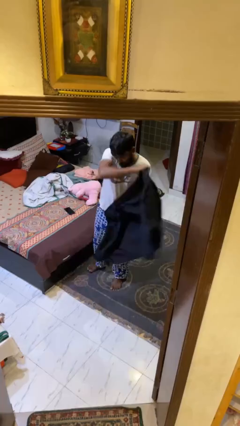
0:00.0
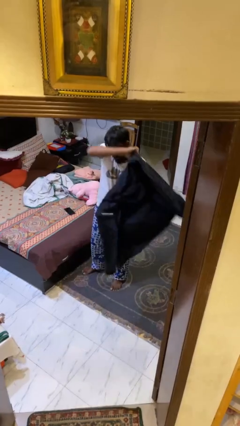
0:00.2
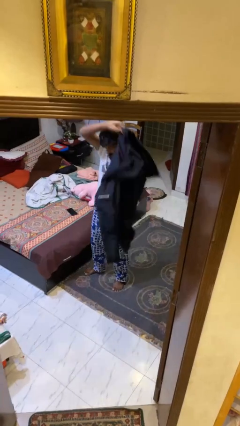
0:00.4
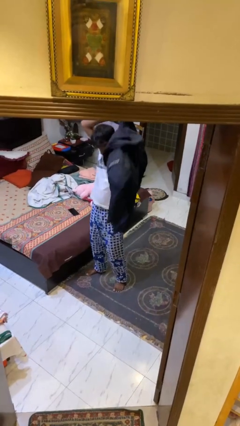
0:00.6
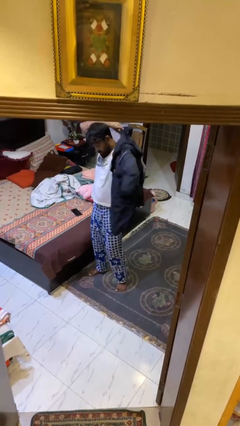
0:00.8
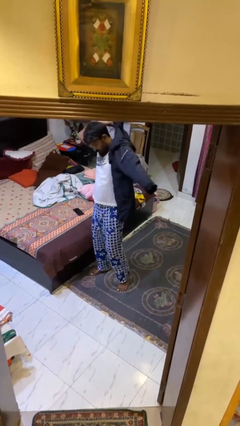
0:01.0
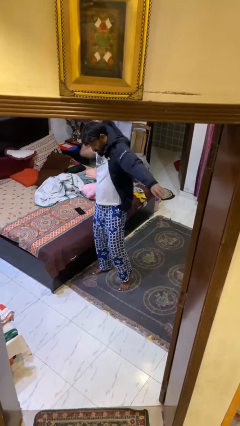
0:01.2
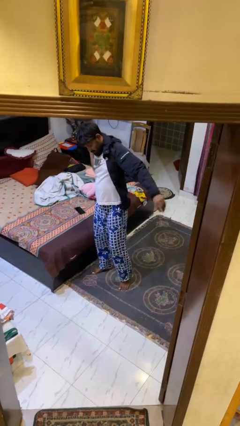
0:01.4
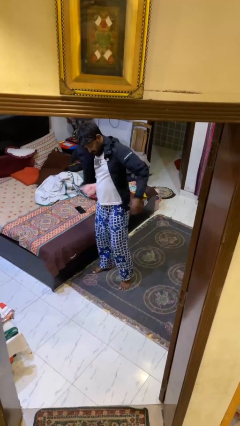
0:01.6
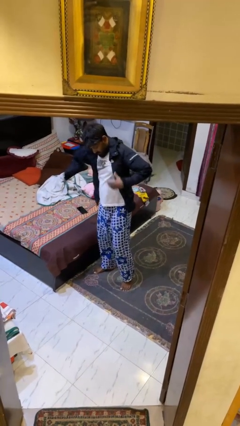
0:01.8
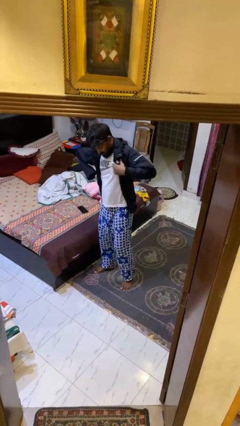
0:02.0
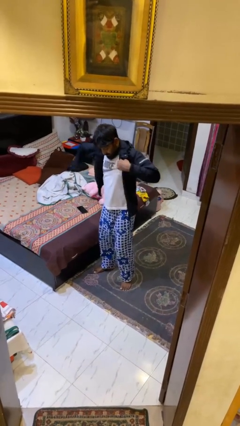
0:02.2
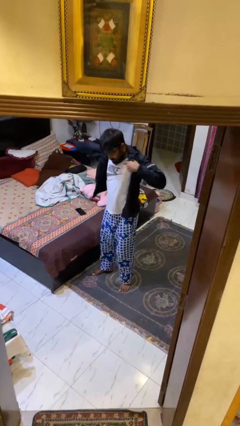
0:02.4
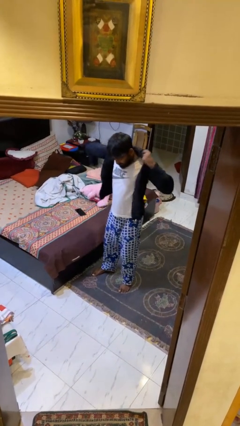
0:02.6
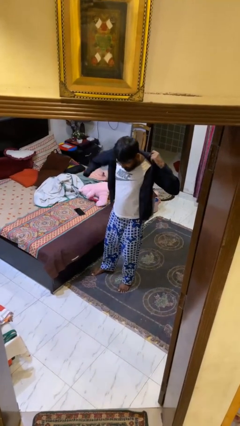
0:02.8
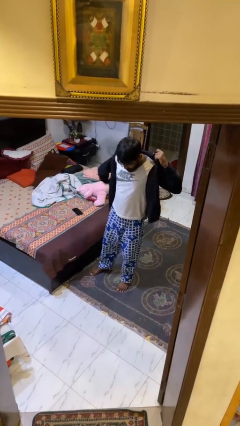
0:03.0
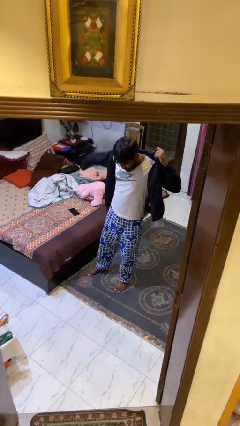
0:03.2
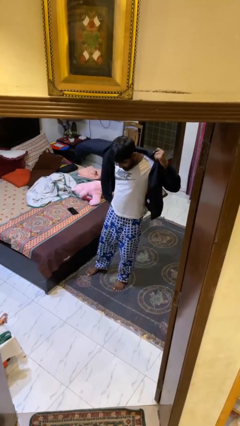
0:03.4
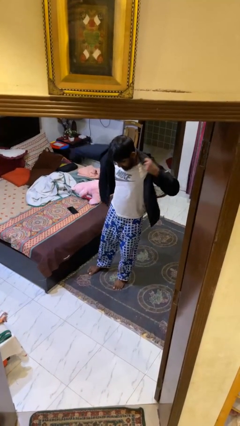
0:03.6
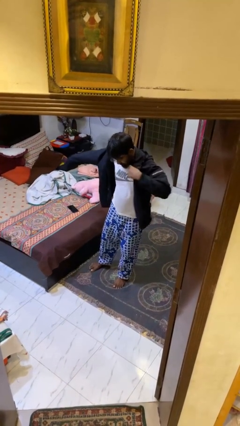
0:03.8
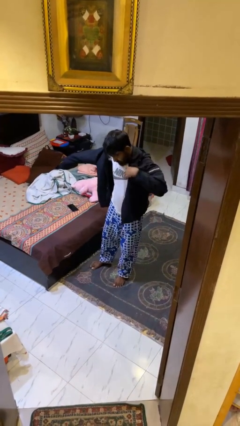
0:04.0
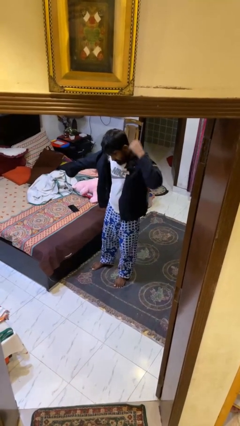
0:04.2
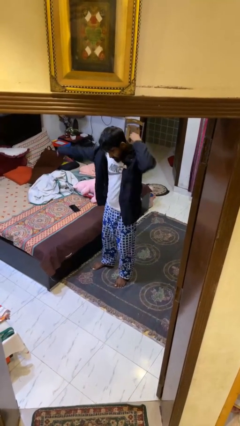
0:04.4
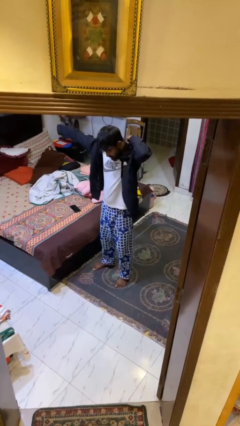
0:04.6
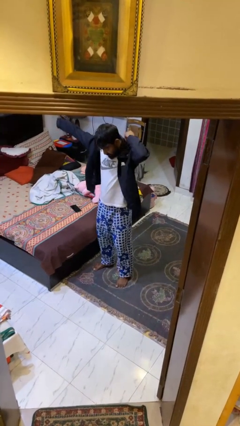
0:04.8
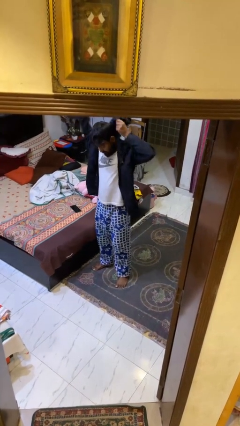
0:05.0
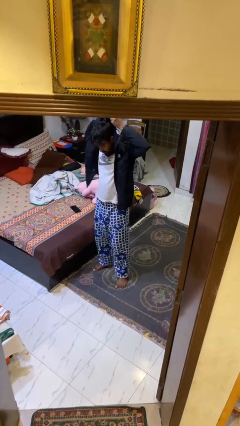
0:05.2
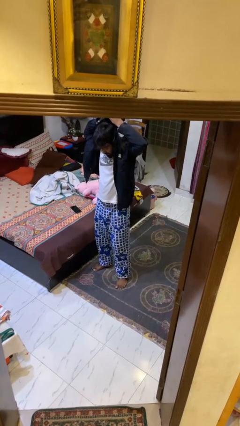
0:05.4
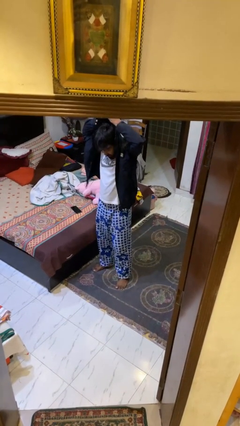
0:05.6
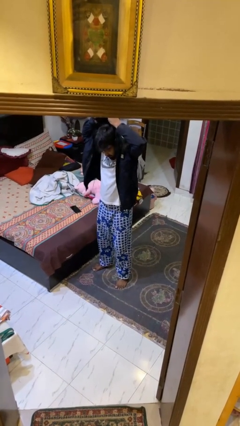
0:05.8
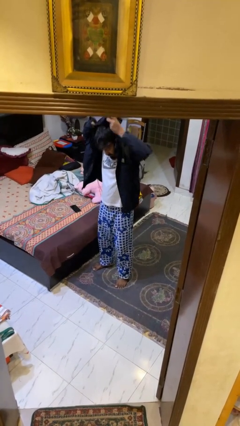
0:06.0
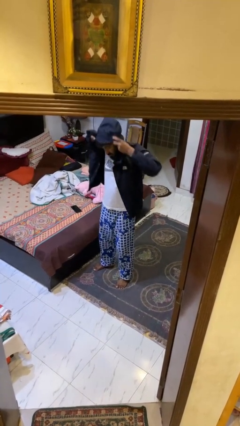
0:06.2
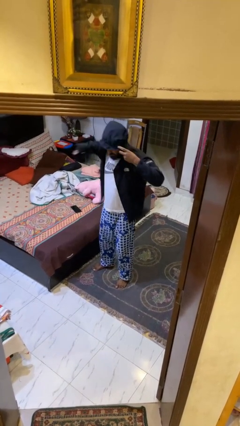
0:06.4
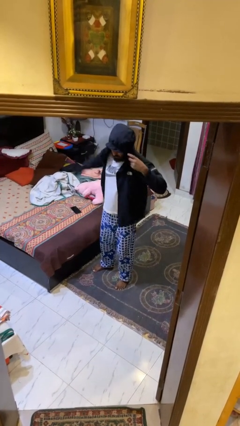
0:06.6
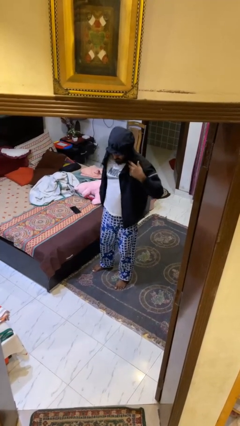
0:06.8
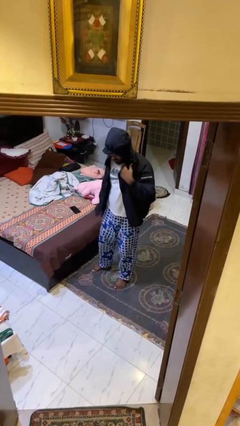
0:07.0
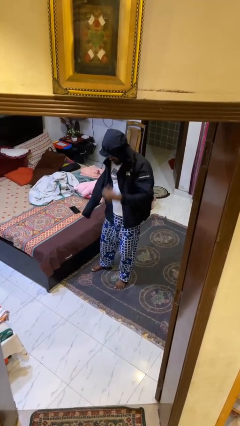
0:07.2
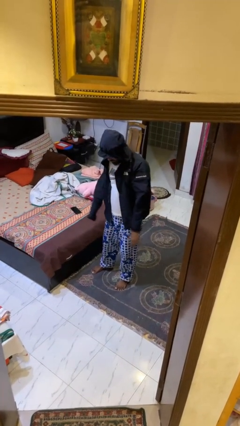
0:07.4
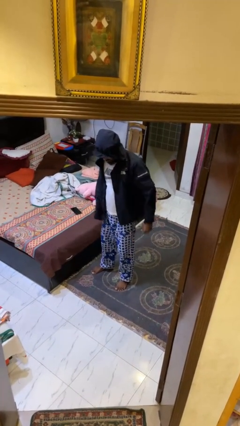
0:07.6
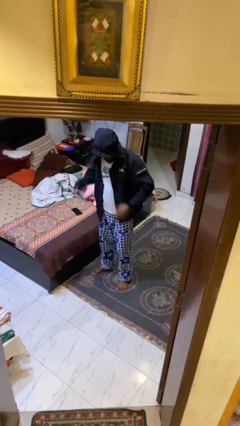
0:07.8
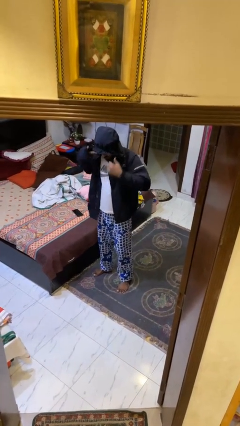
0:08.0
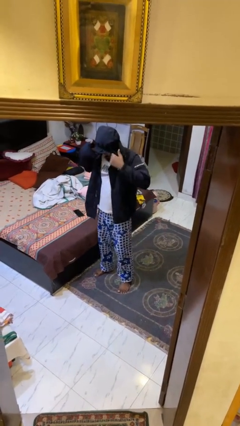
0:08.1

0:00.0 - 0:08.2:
person puts on hoodie

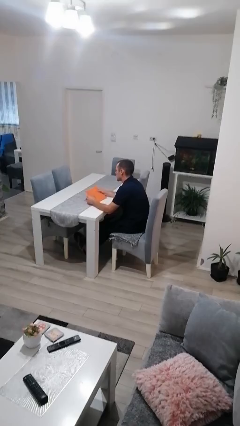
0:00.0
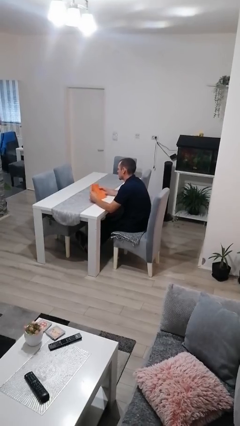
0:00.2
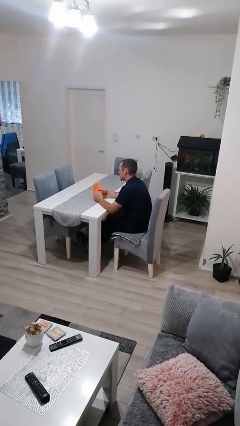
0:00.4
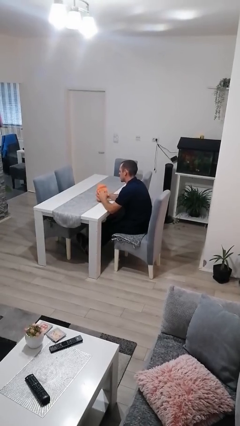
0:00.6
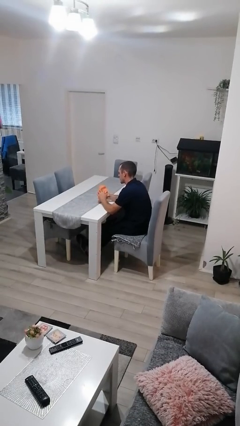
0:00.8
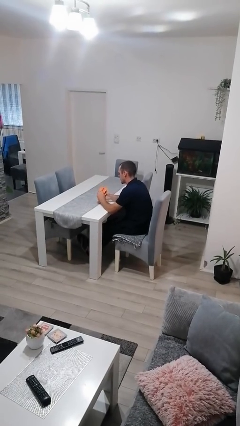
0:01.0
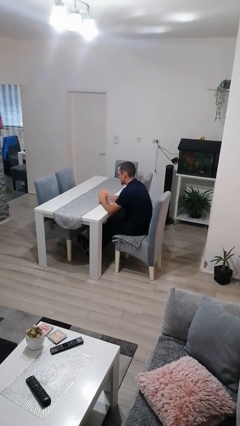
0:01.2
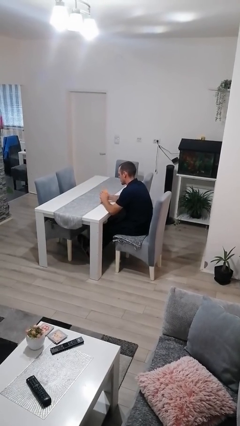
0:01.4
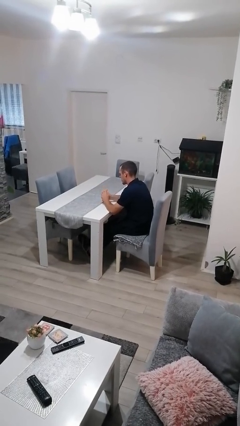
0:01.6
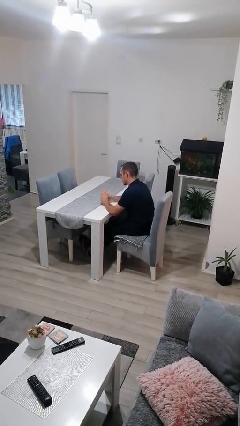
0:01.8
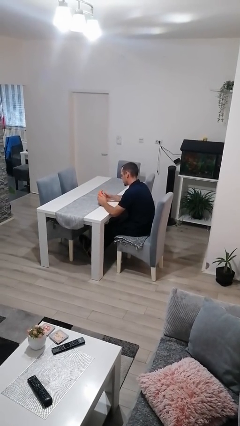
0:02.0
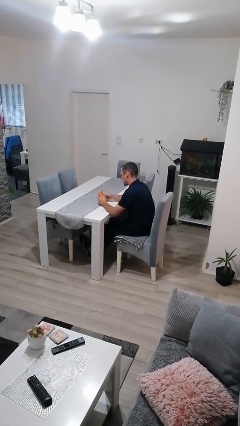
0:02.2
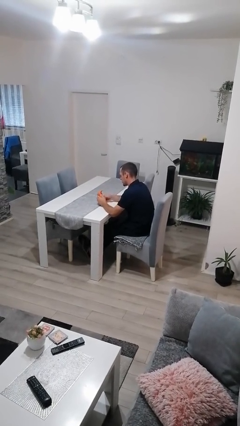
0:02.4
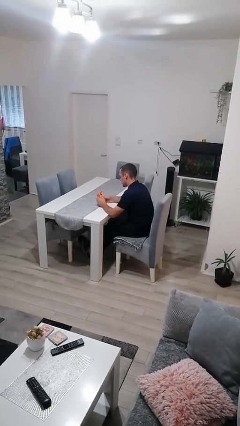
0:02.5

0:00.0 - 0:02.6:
person crumples paper

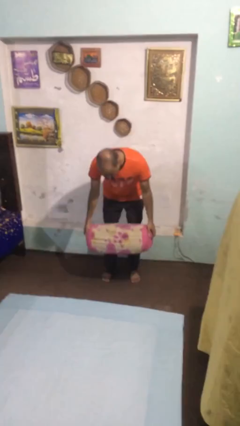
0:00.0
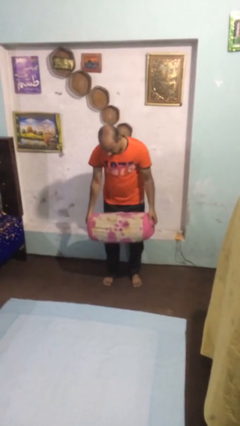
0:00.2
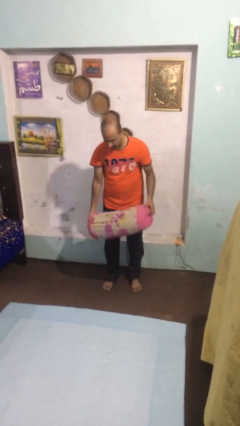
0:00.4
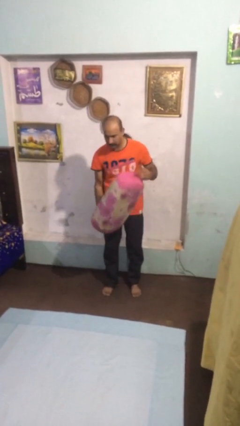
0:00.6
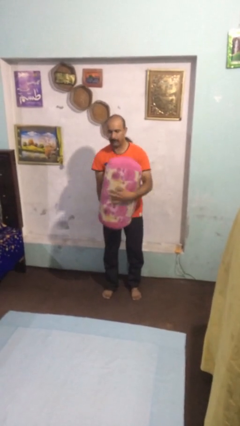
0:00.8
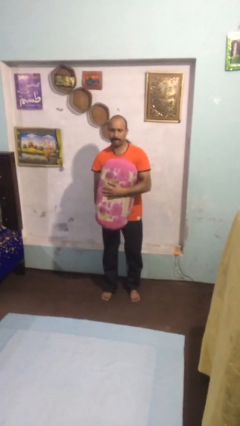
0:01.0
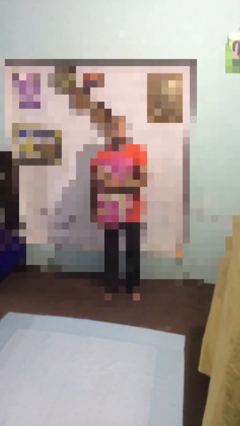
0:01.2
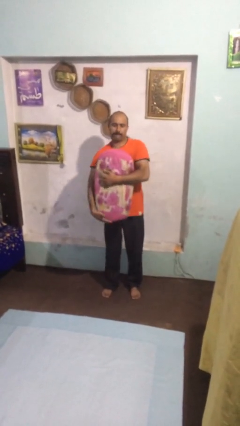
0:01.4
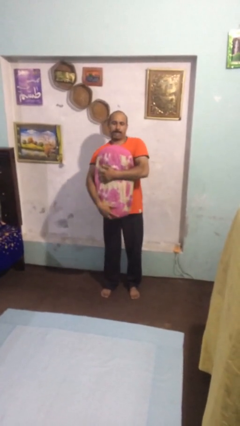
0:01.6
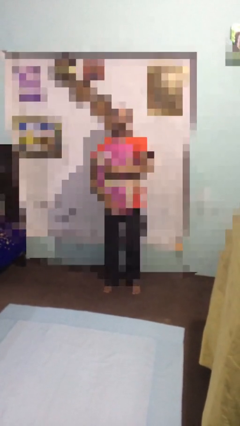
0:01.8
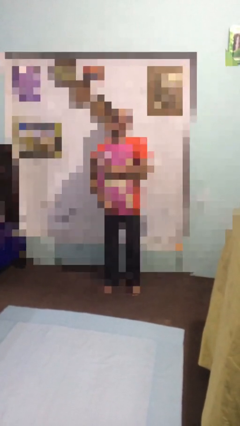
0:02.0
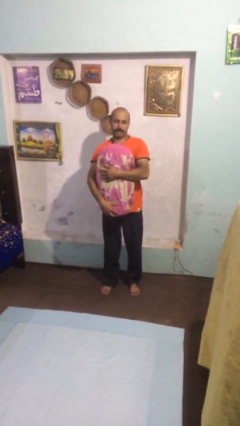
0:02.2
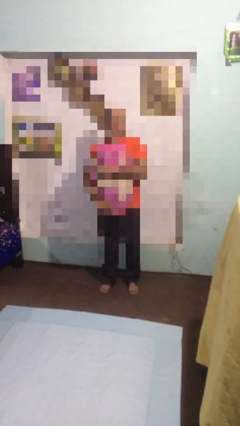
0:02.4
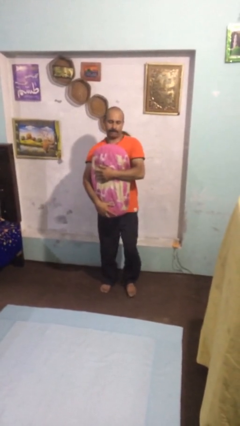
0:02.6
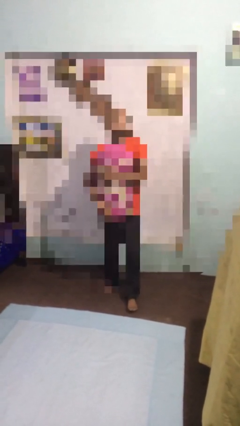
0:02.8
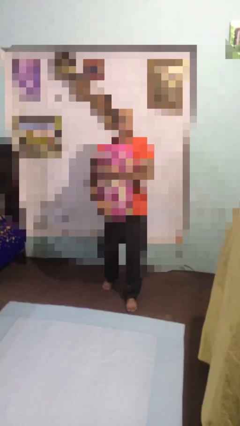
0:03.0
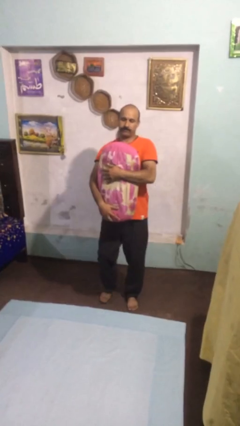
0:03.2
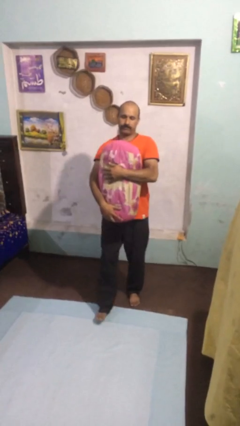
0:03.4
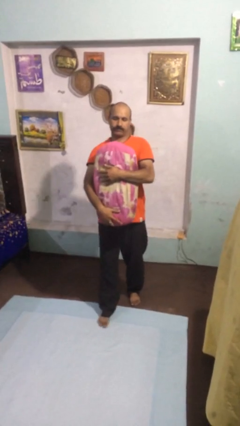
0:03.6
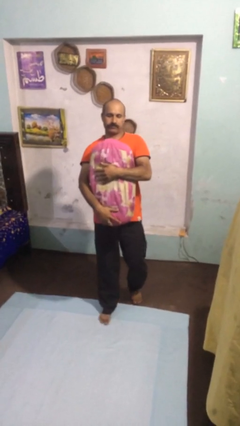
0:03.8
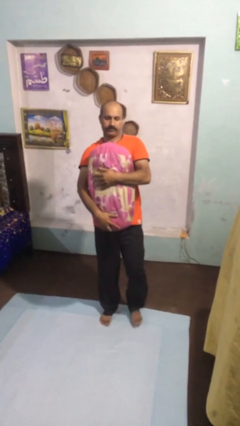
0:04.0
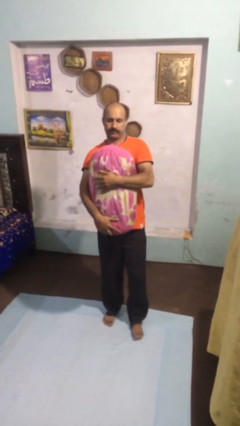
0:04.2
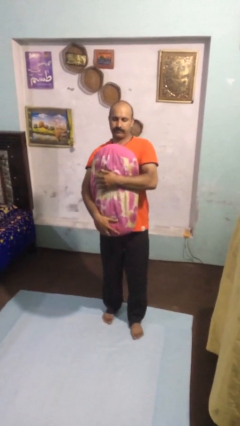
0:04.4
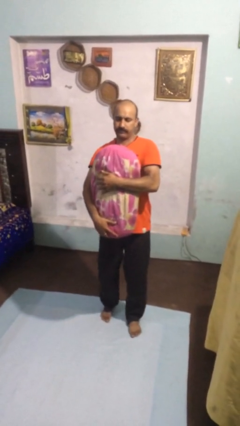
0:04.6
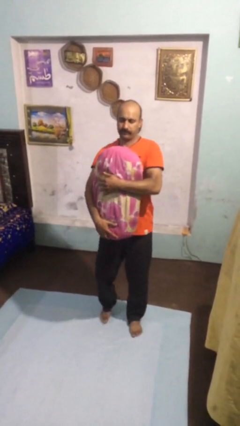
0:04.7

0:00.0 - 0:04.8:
person carries heavy object

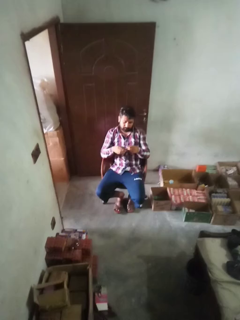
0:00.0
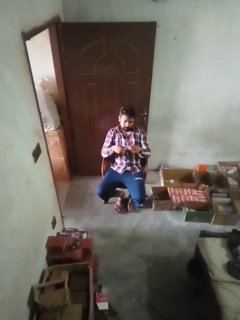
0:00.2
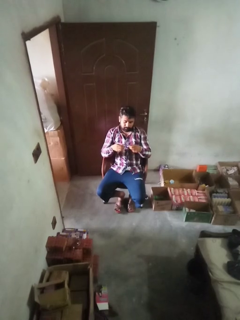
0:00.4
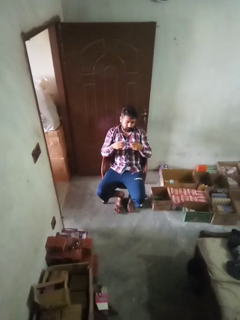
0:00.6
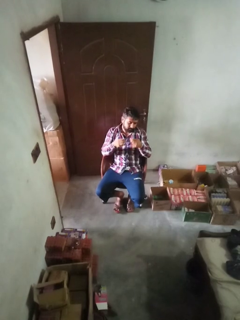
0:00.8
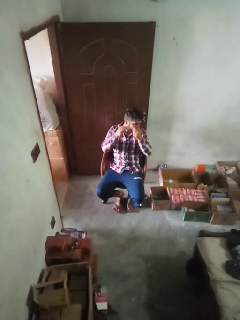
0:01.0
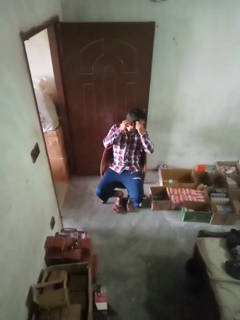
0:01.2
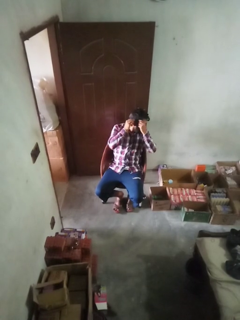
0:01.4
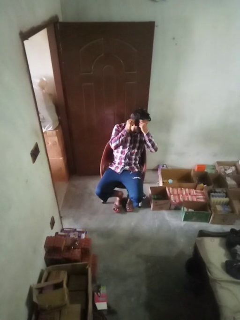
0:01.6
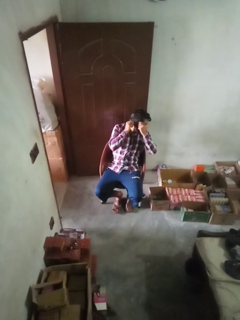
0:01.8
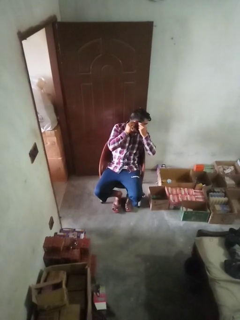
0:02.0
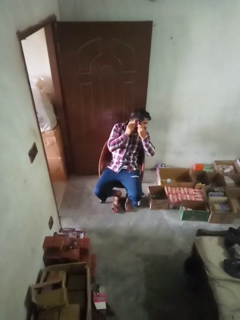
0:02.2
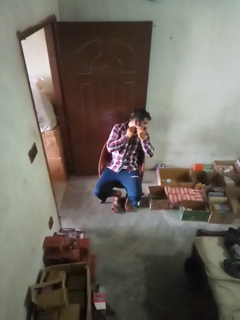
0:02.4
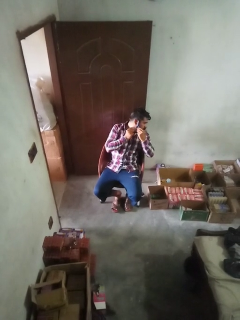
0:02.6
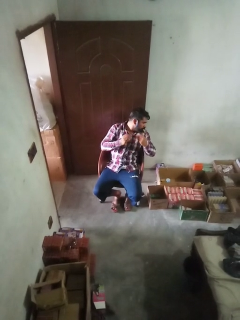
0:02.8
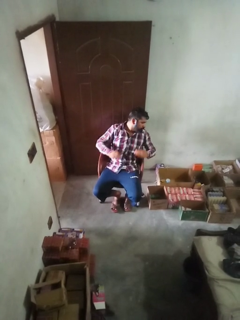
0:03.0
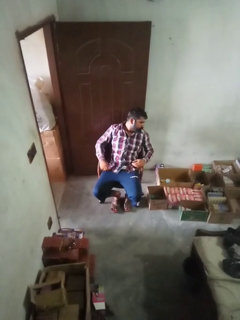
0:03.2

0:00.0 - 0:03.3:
person puts on earrings
